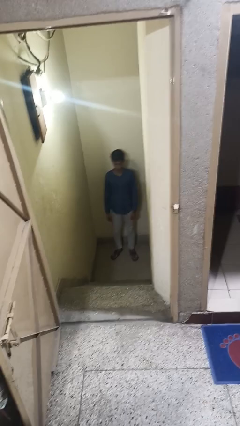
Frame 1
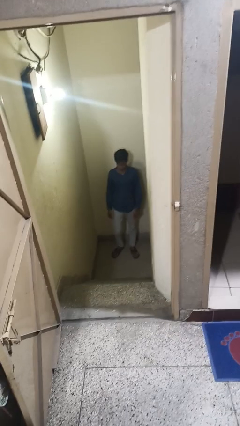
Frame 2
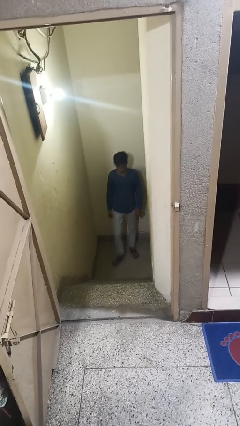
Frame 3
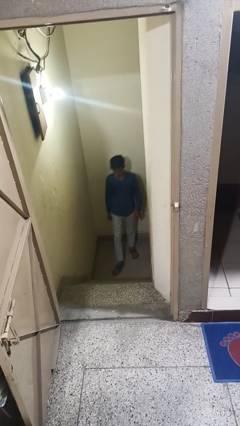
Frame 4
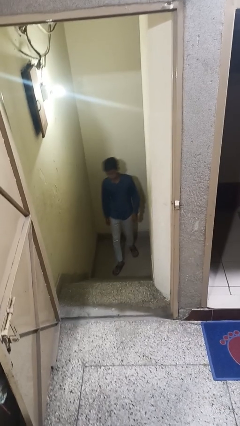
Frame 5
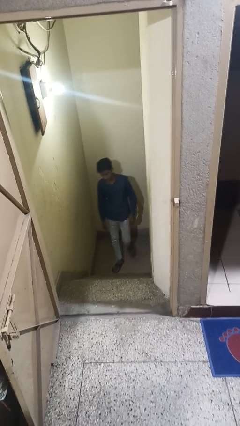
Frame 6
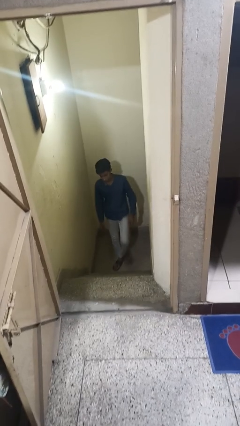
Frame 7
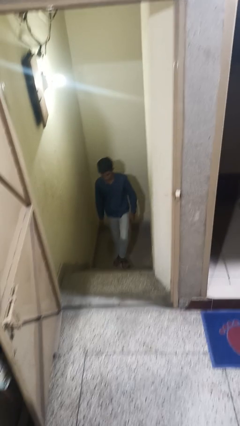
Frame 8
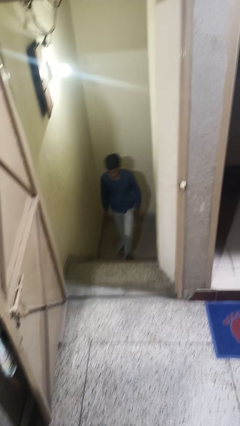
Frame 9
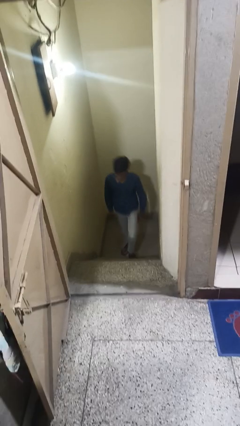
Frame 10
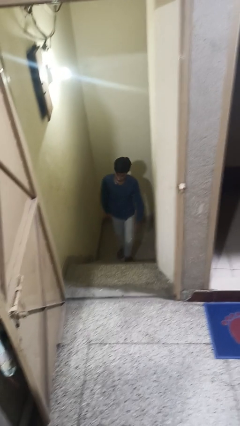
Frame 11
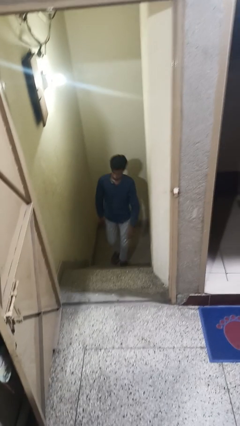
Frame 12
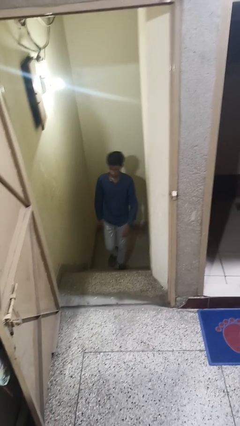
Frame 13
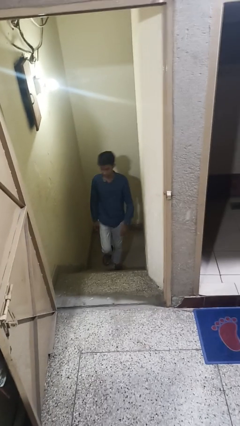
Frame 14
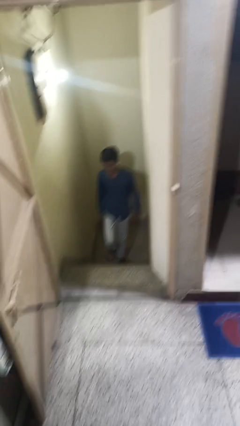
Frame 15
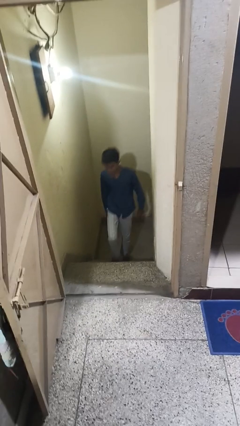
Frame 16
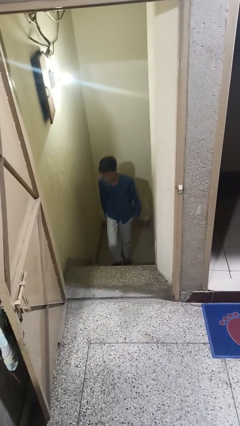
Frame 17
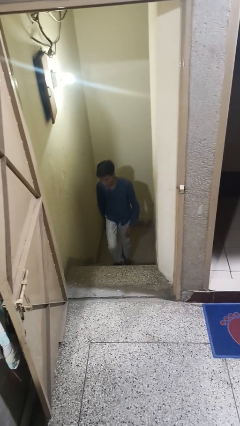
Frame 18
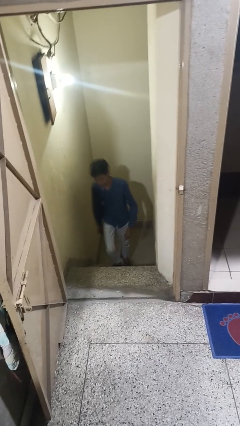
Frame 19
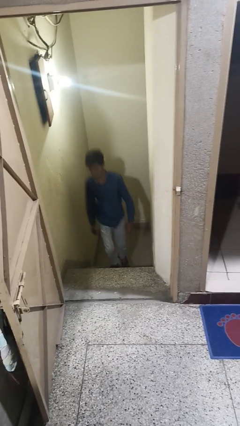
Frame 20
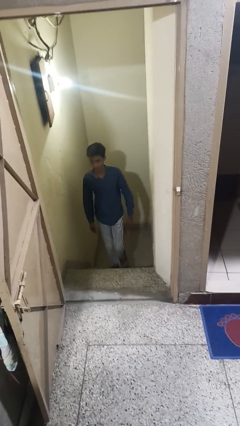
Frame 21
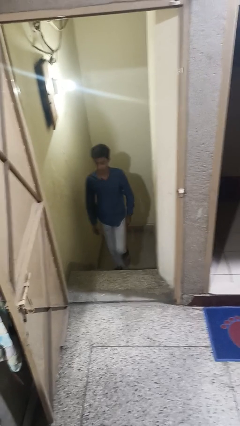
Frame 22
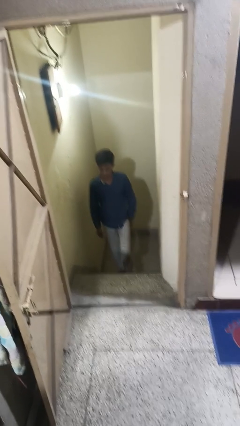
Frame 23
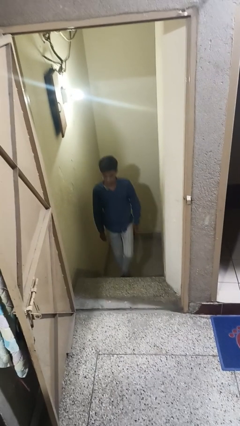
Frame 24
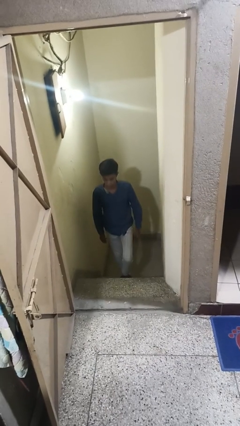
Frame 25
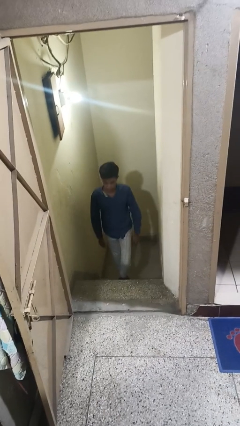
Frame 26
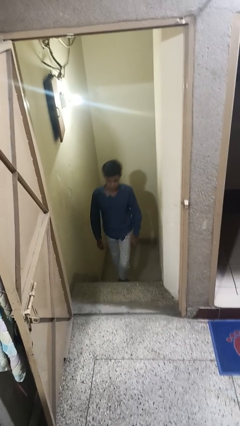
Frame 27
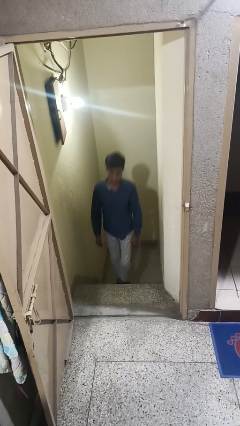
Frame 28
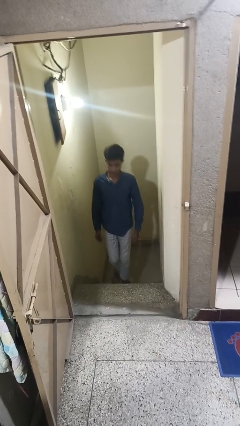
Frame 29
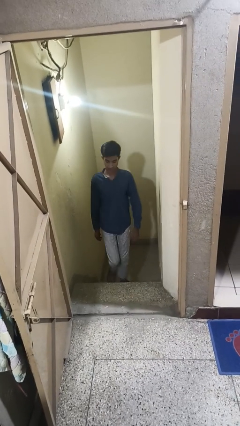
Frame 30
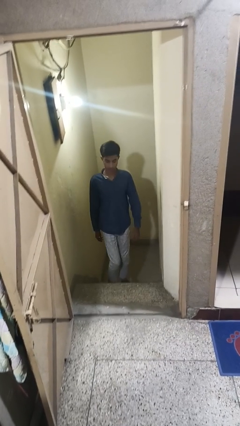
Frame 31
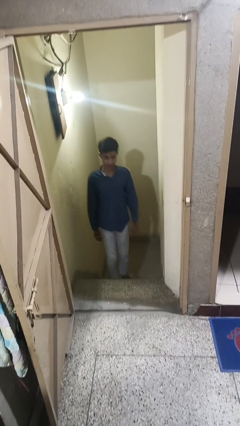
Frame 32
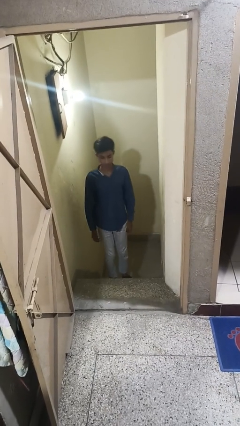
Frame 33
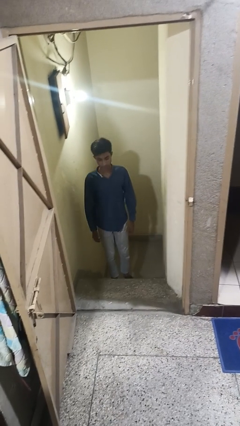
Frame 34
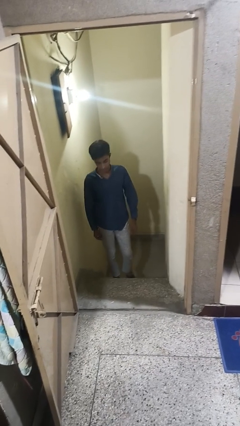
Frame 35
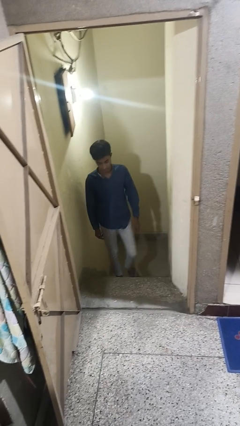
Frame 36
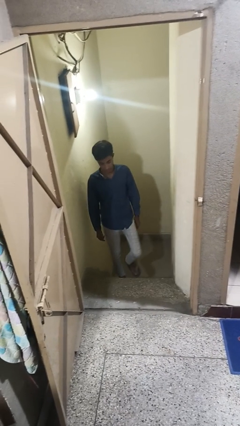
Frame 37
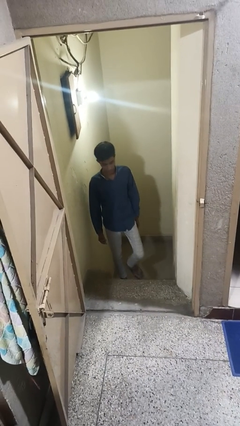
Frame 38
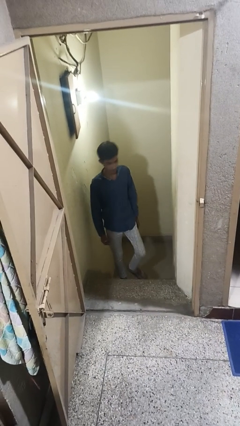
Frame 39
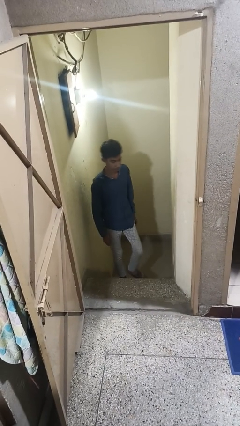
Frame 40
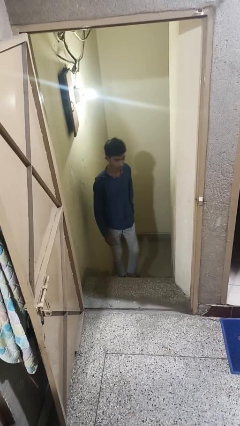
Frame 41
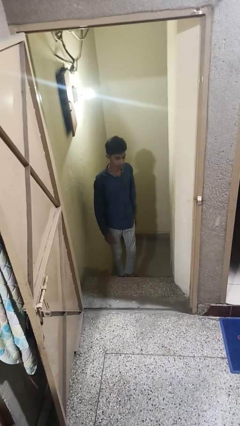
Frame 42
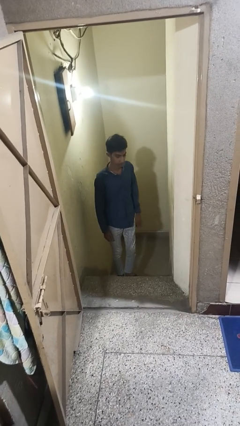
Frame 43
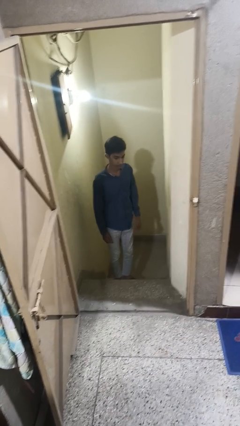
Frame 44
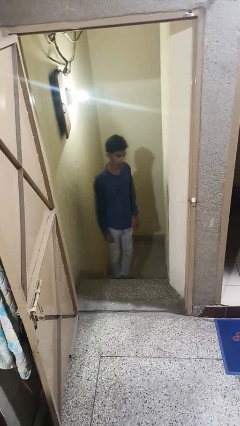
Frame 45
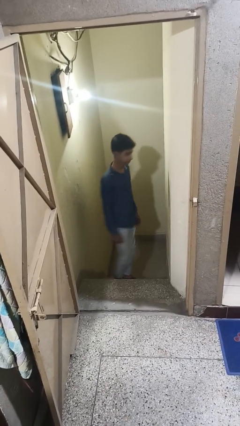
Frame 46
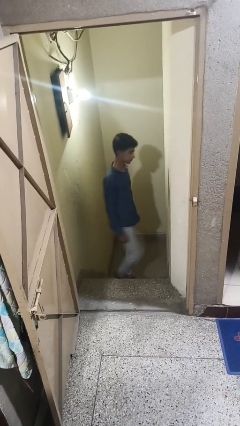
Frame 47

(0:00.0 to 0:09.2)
person climbs up stairs

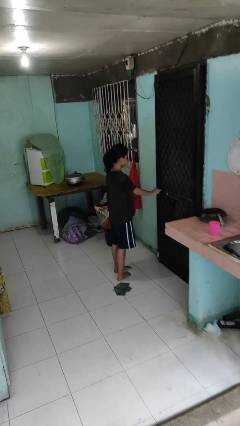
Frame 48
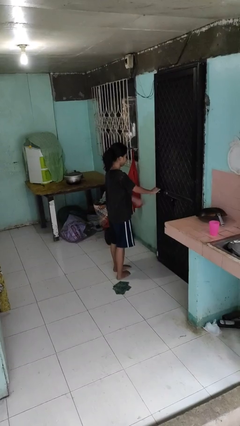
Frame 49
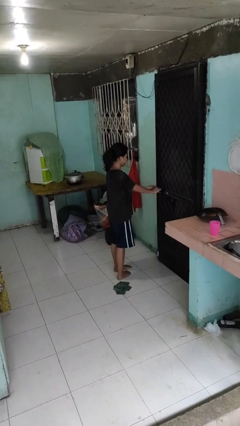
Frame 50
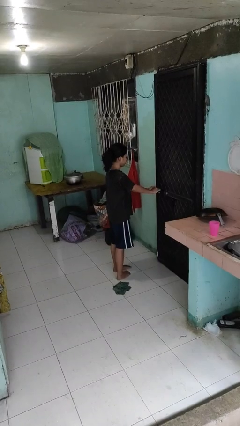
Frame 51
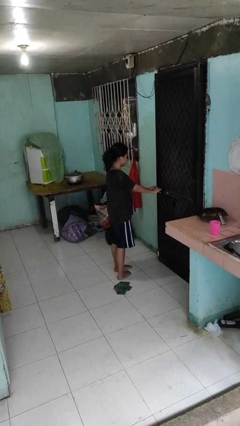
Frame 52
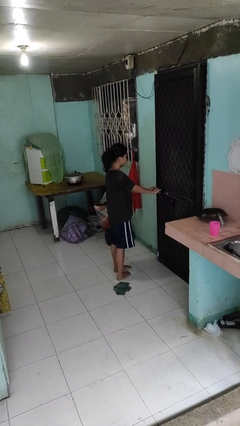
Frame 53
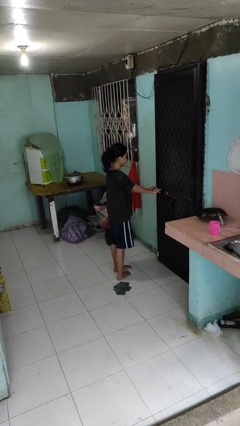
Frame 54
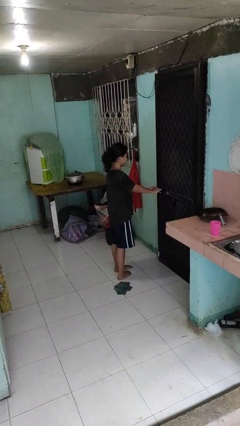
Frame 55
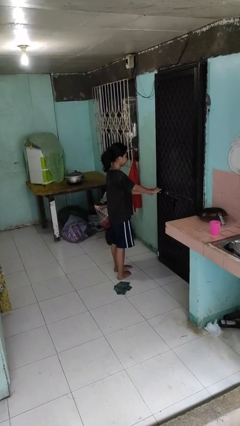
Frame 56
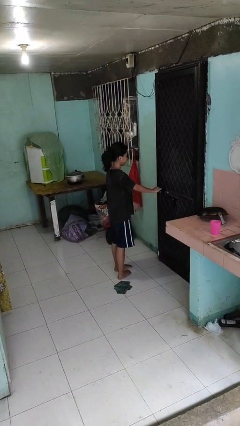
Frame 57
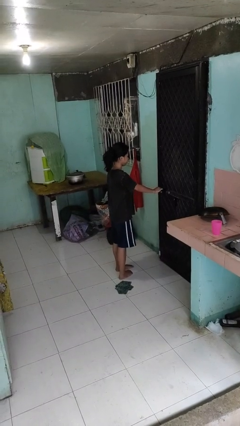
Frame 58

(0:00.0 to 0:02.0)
person locks door with keys

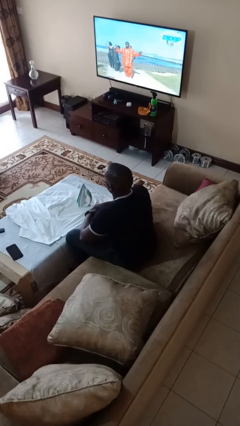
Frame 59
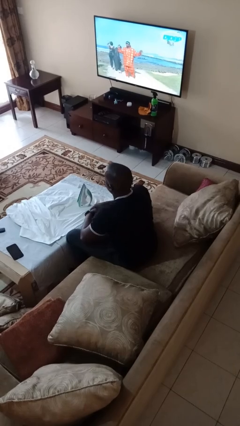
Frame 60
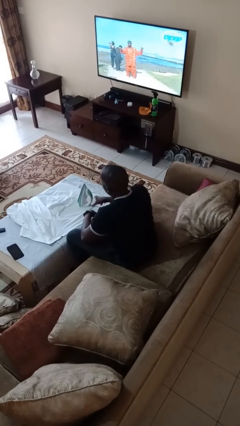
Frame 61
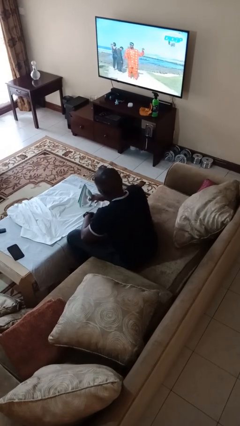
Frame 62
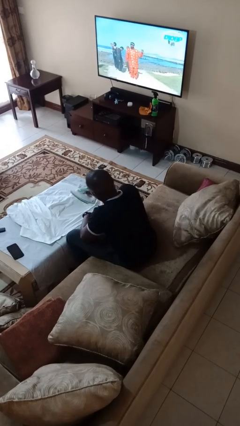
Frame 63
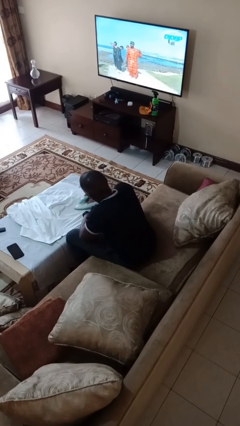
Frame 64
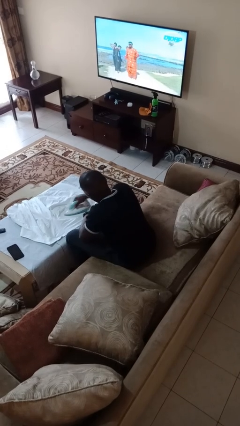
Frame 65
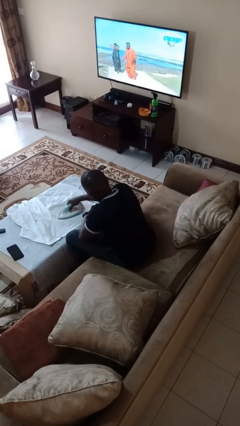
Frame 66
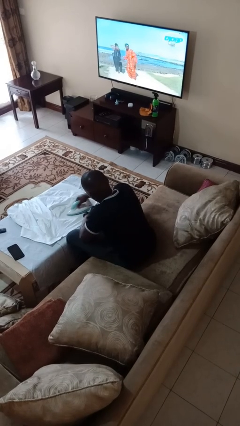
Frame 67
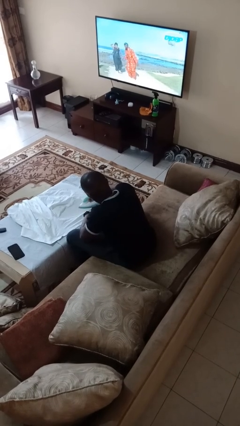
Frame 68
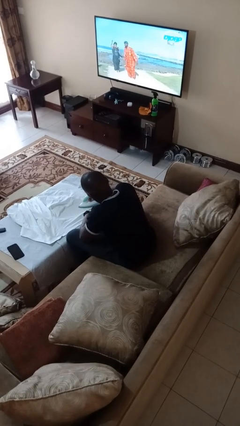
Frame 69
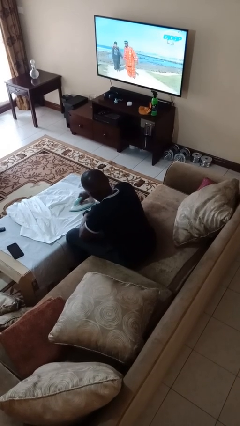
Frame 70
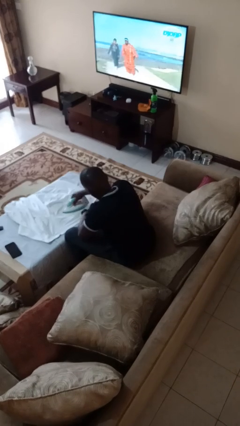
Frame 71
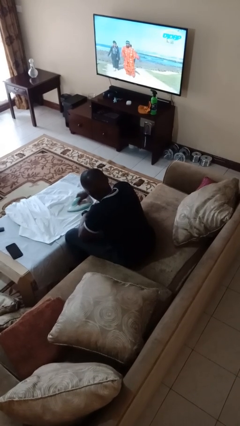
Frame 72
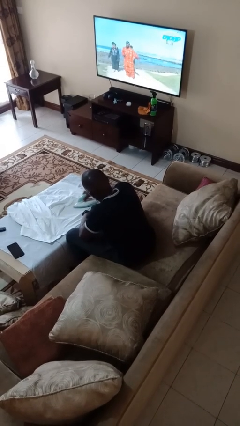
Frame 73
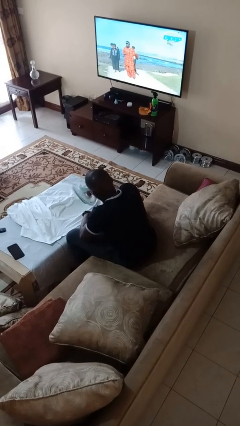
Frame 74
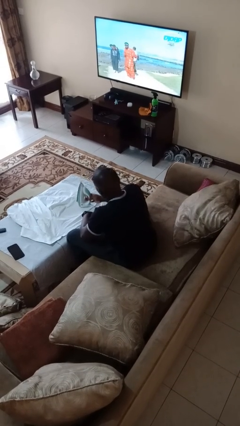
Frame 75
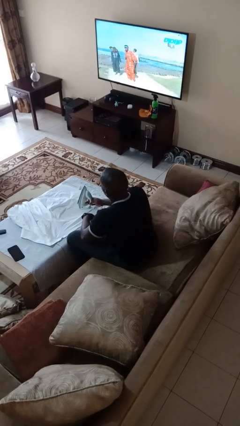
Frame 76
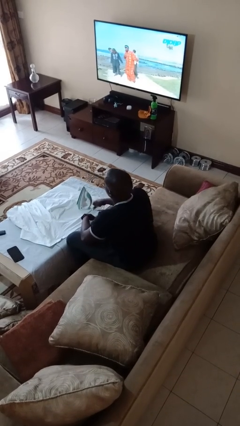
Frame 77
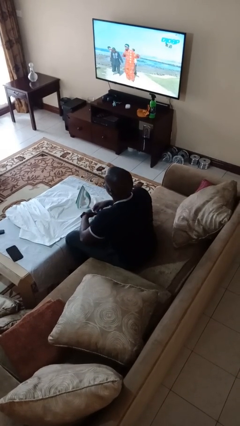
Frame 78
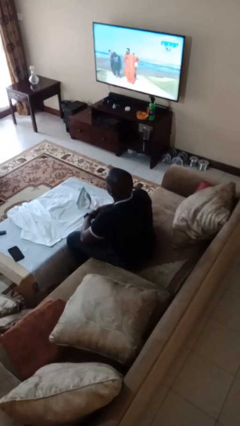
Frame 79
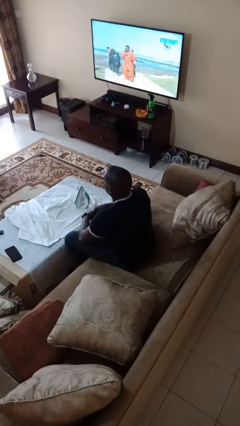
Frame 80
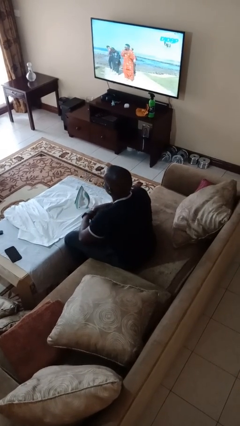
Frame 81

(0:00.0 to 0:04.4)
person irons clothes

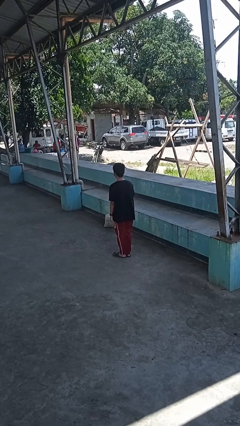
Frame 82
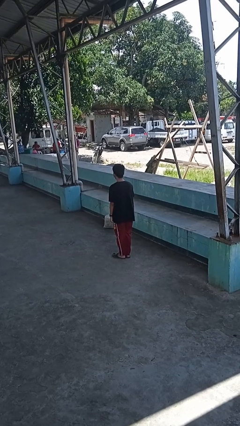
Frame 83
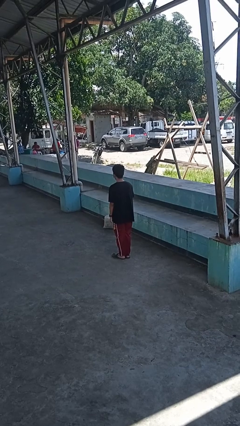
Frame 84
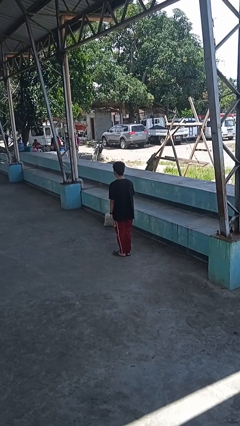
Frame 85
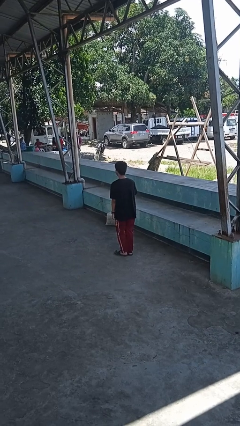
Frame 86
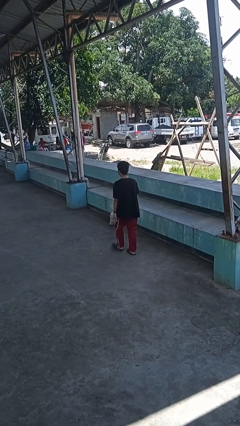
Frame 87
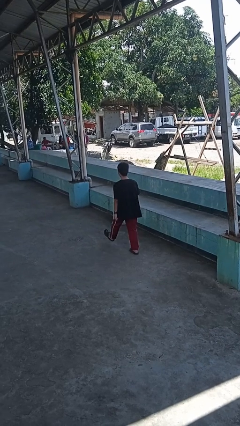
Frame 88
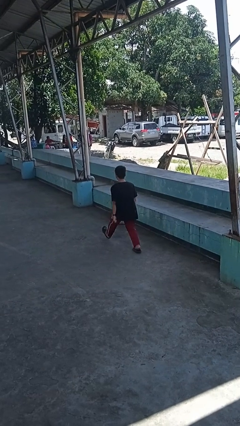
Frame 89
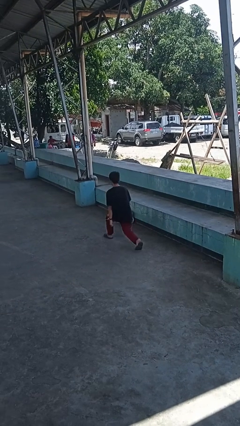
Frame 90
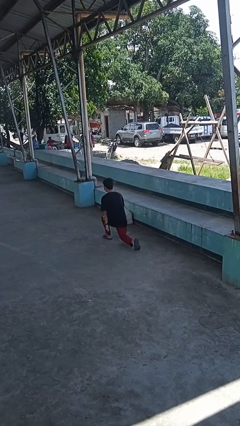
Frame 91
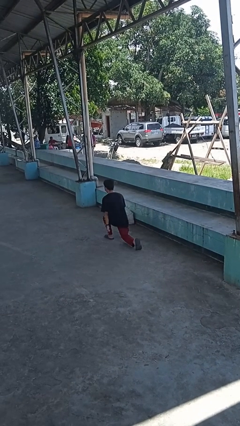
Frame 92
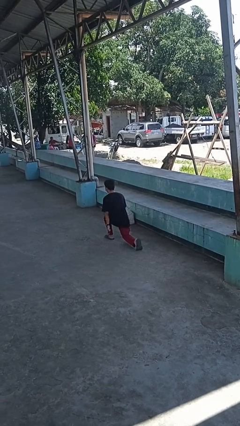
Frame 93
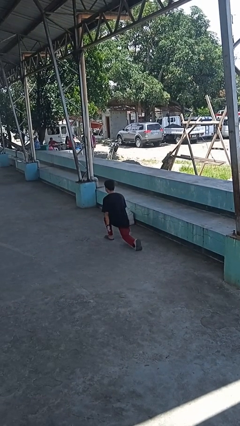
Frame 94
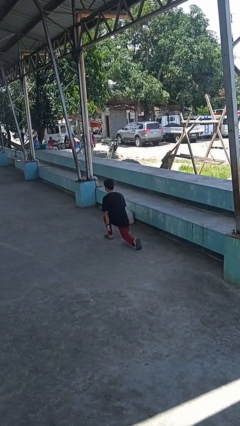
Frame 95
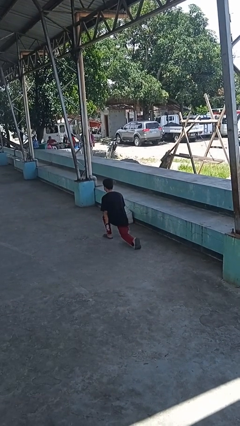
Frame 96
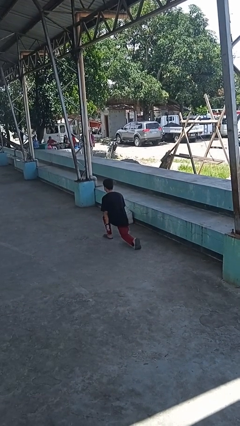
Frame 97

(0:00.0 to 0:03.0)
person exercises with lunges
